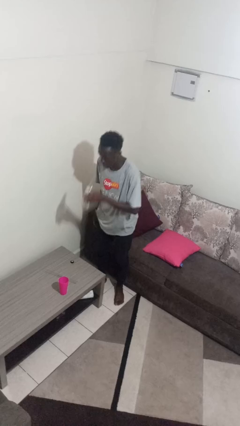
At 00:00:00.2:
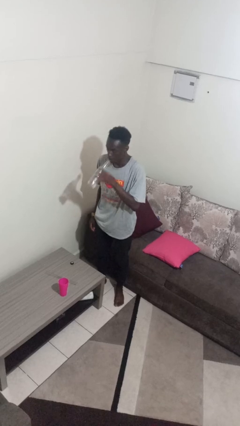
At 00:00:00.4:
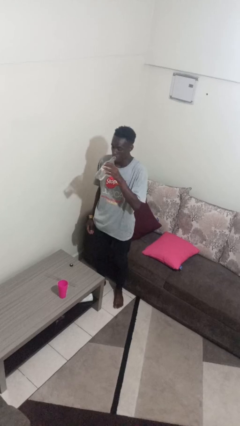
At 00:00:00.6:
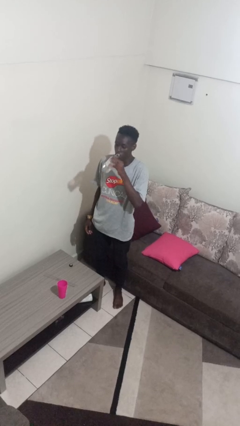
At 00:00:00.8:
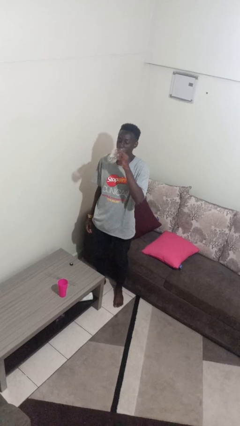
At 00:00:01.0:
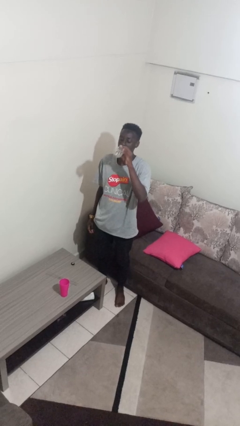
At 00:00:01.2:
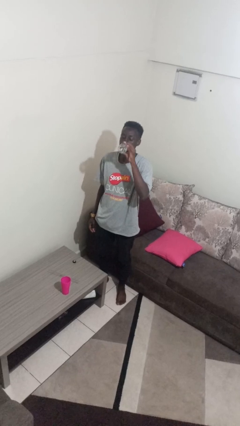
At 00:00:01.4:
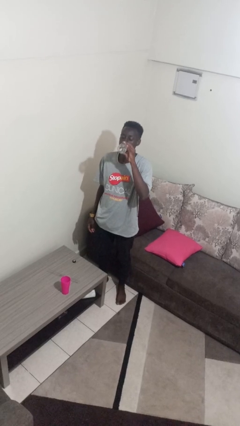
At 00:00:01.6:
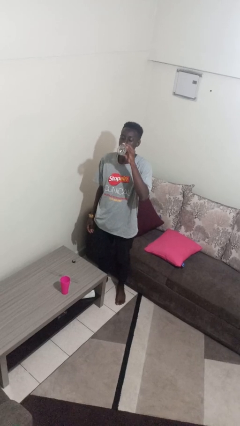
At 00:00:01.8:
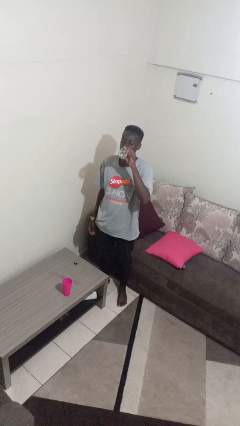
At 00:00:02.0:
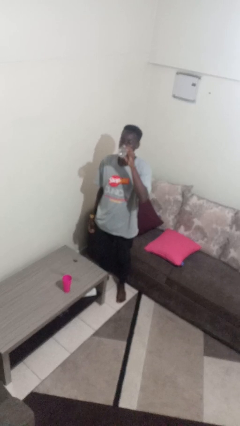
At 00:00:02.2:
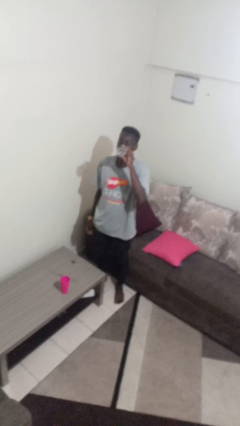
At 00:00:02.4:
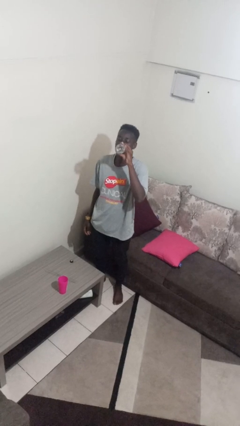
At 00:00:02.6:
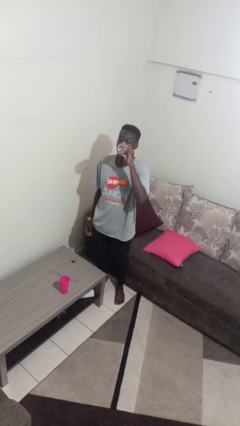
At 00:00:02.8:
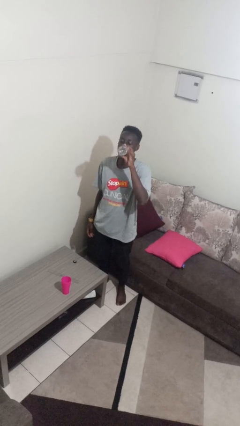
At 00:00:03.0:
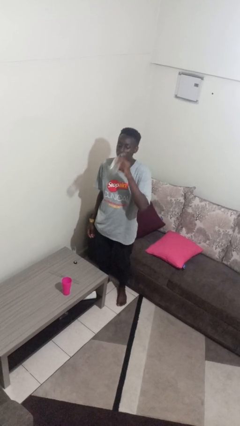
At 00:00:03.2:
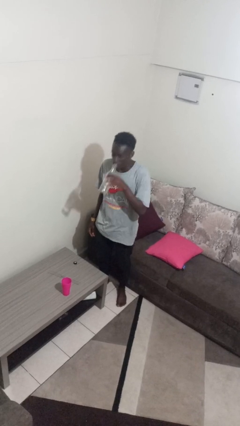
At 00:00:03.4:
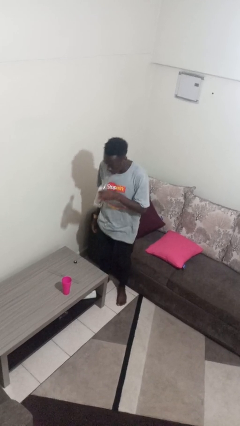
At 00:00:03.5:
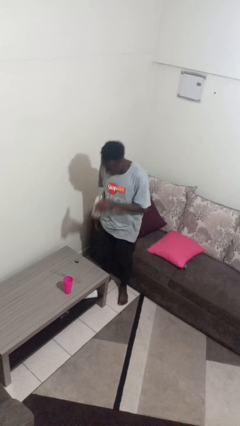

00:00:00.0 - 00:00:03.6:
person drinks from bottle

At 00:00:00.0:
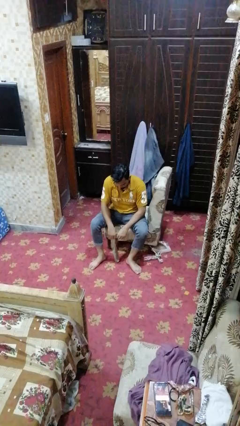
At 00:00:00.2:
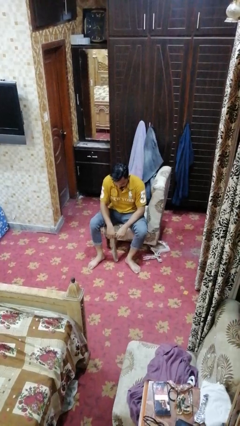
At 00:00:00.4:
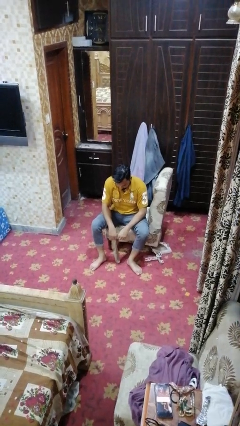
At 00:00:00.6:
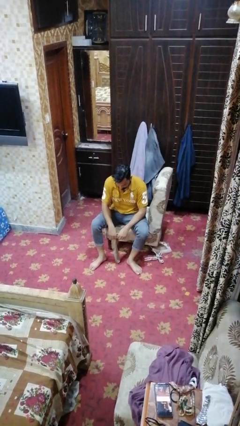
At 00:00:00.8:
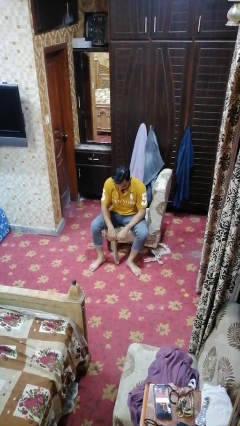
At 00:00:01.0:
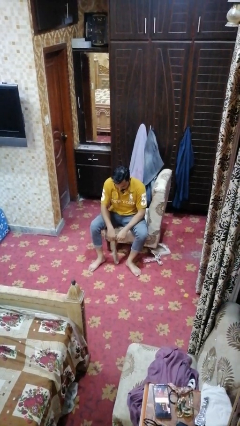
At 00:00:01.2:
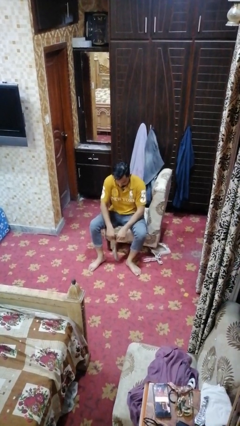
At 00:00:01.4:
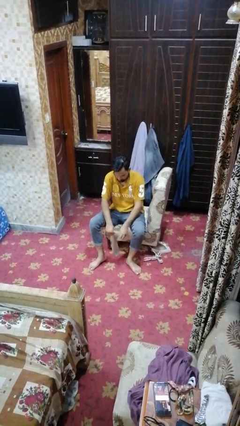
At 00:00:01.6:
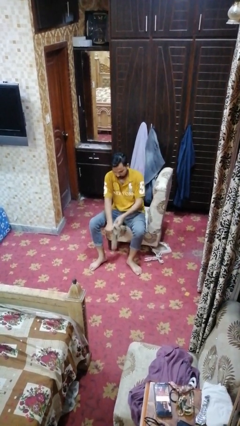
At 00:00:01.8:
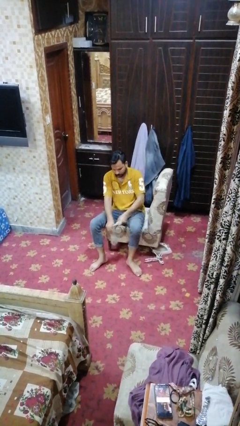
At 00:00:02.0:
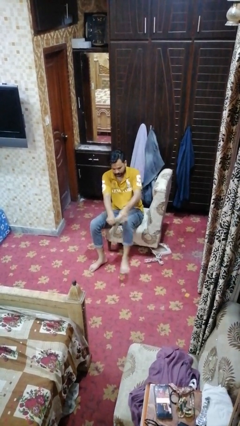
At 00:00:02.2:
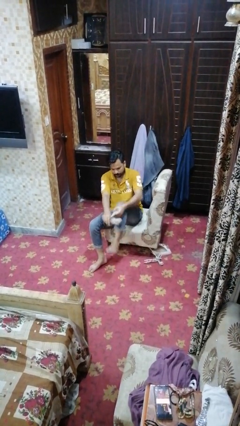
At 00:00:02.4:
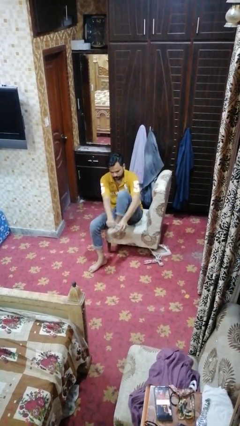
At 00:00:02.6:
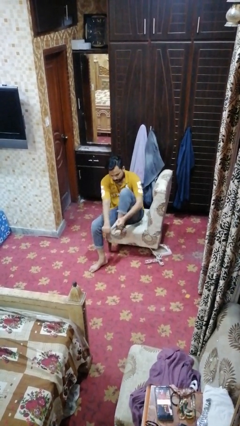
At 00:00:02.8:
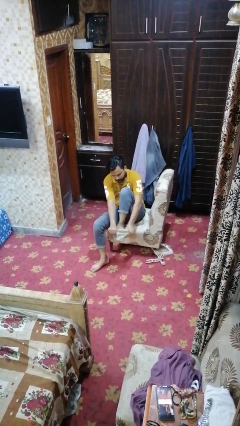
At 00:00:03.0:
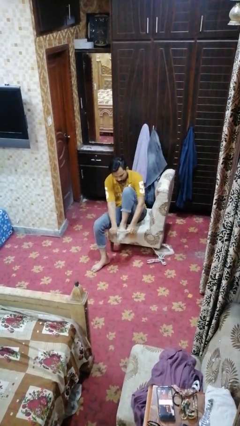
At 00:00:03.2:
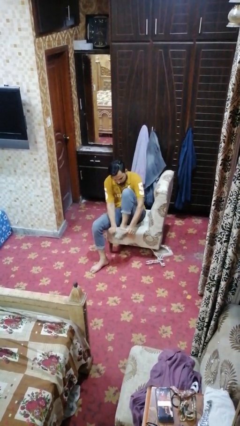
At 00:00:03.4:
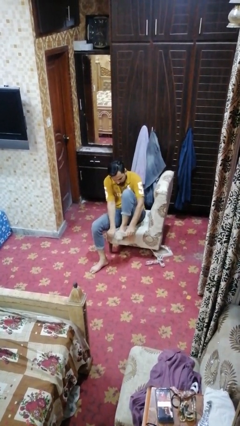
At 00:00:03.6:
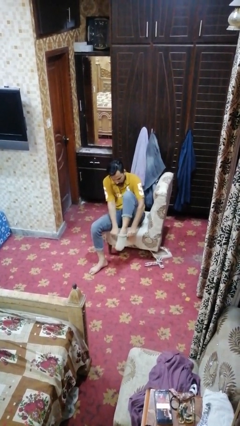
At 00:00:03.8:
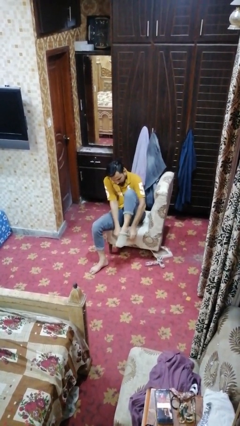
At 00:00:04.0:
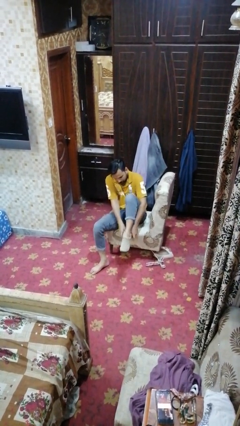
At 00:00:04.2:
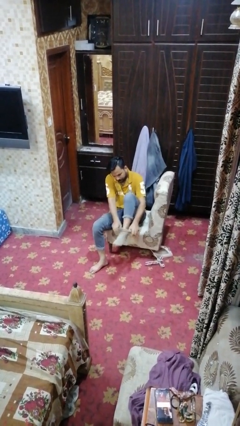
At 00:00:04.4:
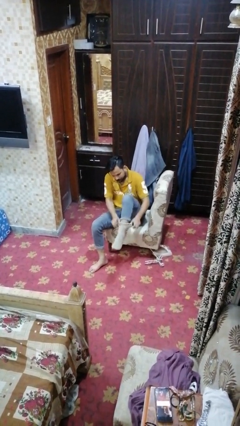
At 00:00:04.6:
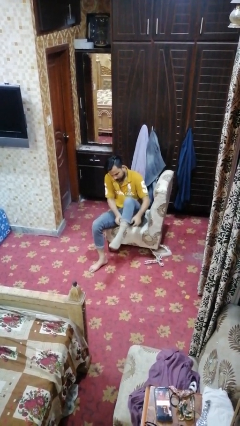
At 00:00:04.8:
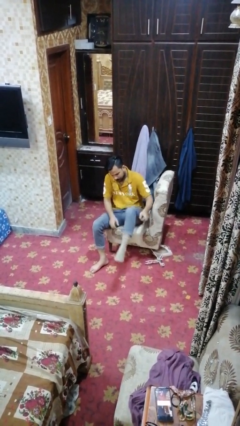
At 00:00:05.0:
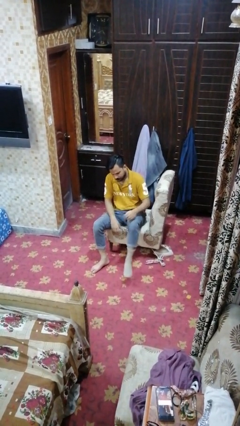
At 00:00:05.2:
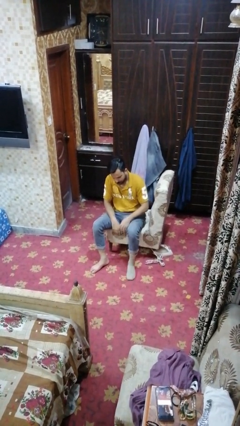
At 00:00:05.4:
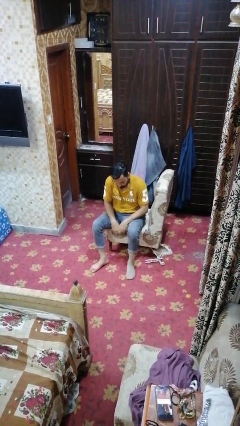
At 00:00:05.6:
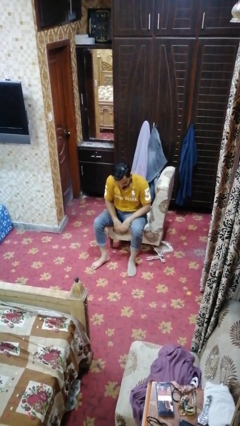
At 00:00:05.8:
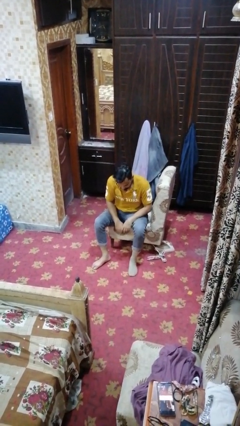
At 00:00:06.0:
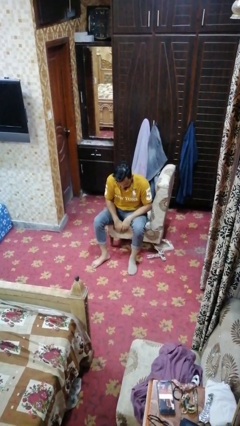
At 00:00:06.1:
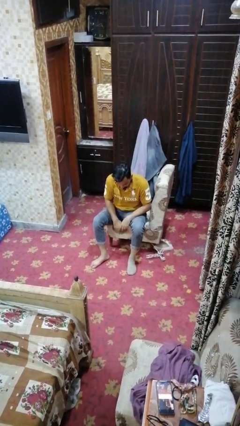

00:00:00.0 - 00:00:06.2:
person puts on socks

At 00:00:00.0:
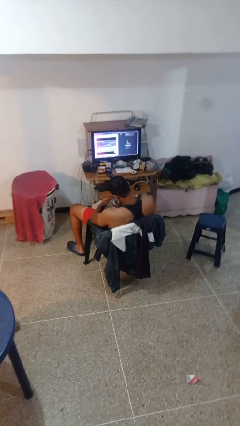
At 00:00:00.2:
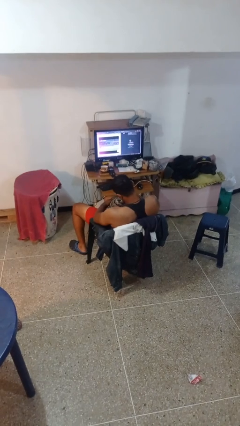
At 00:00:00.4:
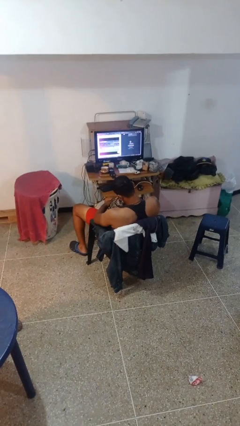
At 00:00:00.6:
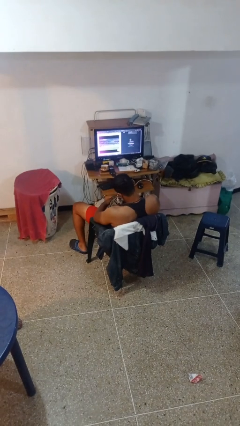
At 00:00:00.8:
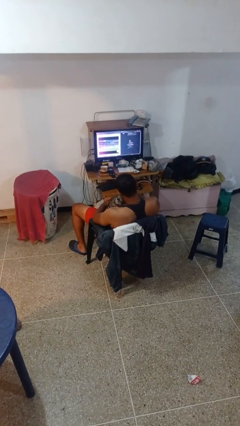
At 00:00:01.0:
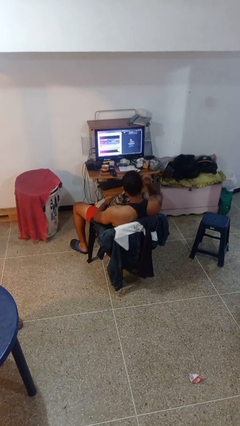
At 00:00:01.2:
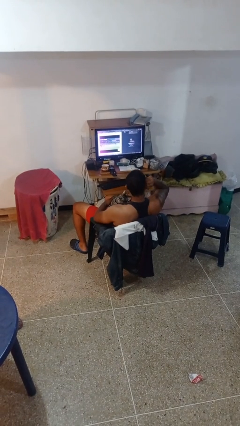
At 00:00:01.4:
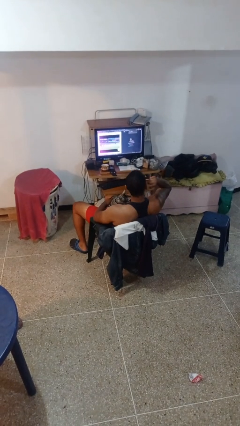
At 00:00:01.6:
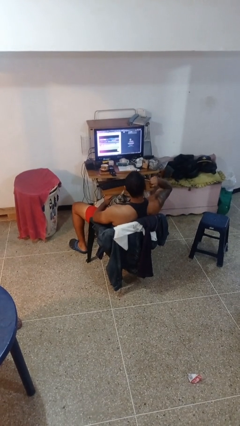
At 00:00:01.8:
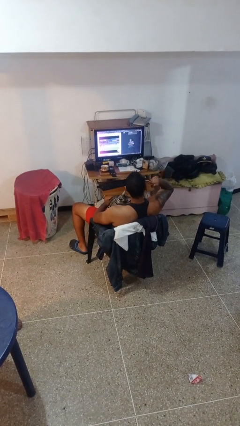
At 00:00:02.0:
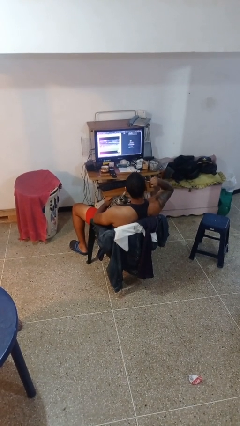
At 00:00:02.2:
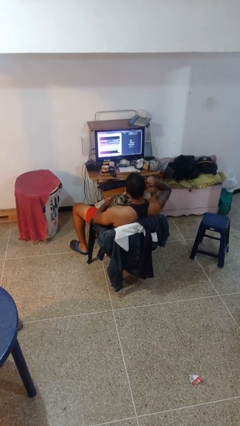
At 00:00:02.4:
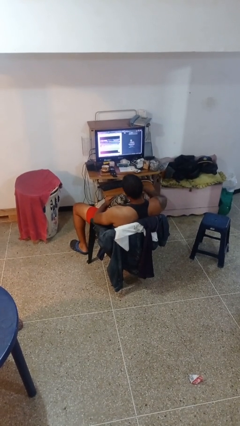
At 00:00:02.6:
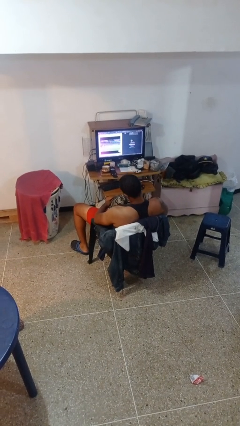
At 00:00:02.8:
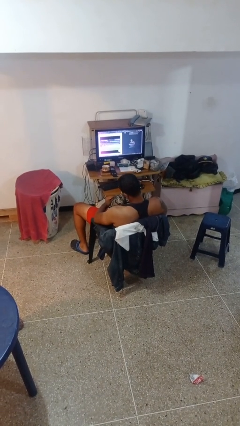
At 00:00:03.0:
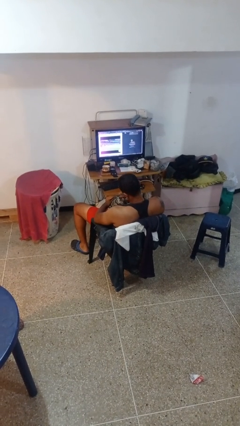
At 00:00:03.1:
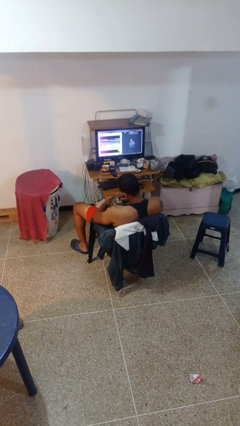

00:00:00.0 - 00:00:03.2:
person gestures listen closely

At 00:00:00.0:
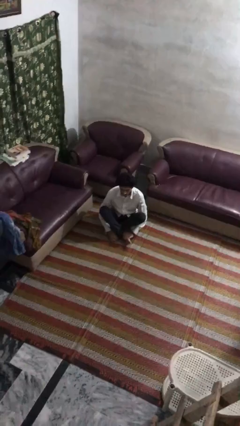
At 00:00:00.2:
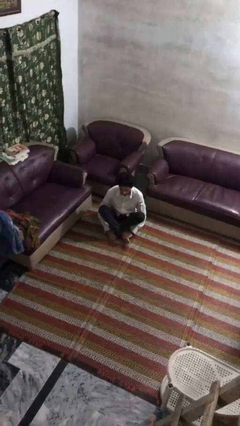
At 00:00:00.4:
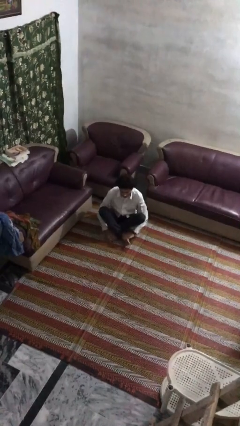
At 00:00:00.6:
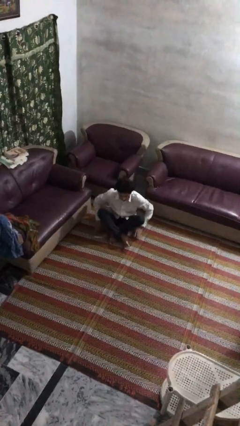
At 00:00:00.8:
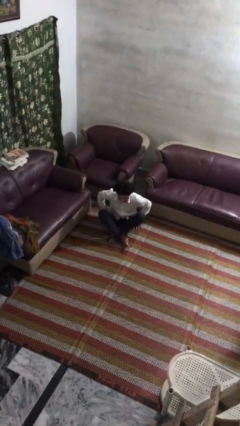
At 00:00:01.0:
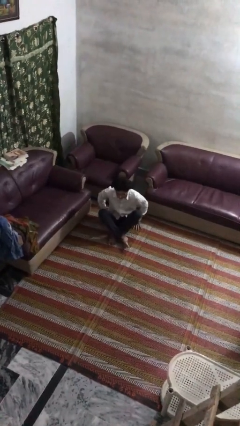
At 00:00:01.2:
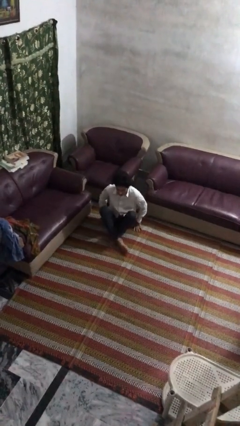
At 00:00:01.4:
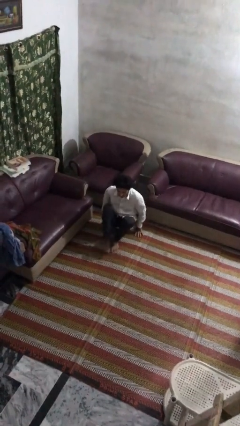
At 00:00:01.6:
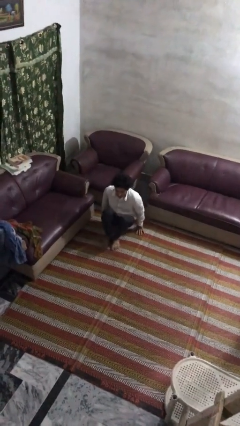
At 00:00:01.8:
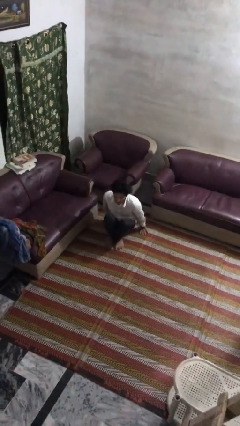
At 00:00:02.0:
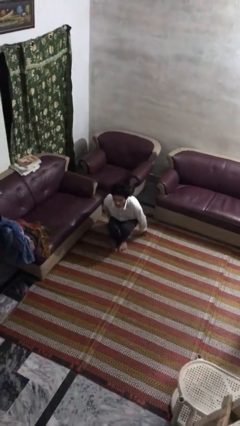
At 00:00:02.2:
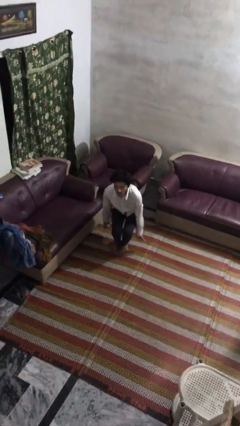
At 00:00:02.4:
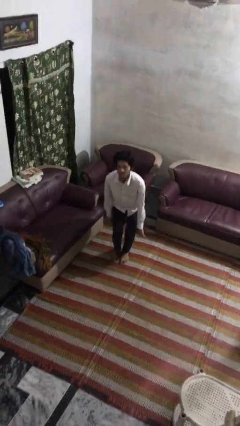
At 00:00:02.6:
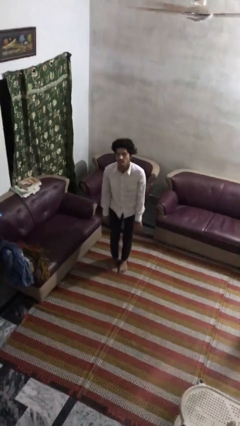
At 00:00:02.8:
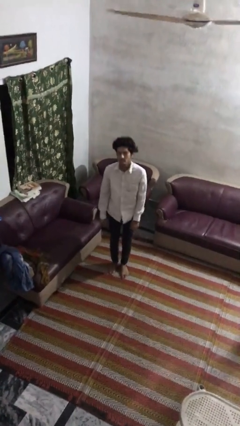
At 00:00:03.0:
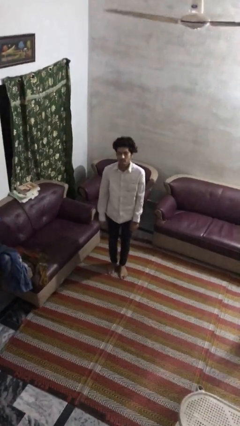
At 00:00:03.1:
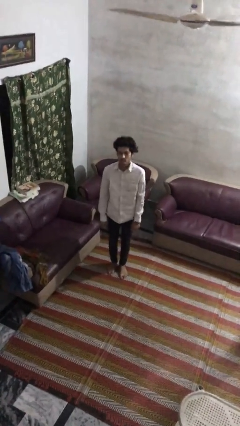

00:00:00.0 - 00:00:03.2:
person stands up from floor
